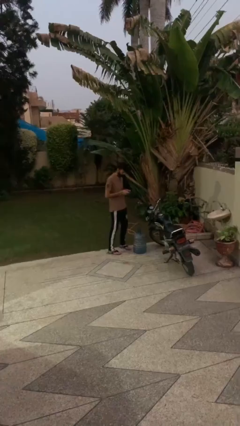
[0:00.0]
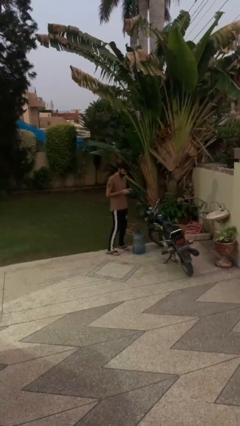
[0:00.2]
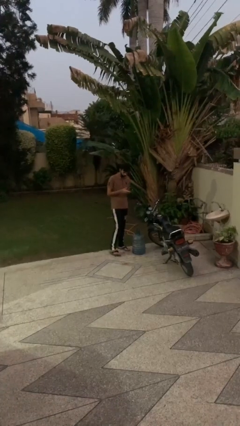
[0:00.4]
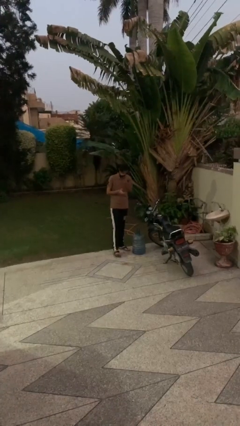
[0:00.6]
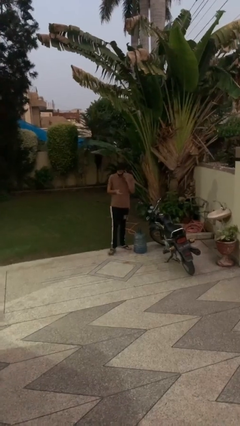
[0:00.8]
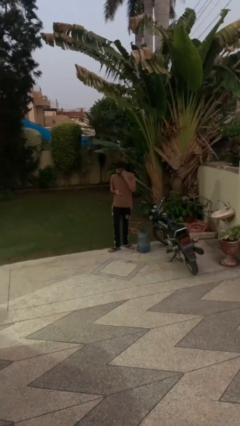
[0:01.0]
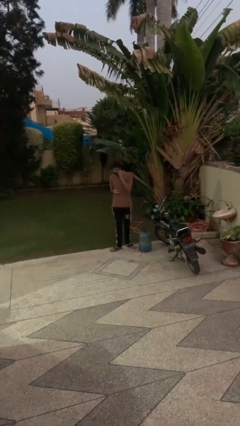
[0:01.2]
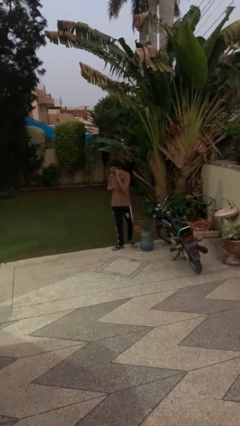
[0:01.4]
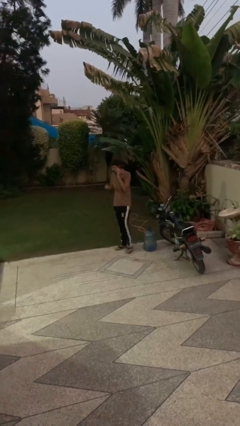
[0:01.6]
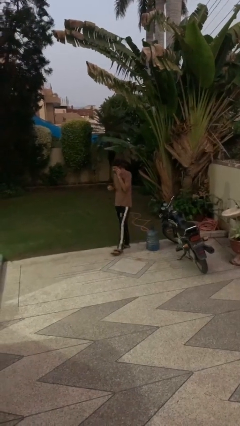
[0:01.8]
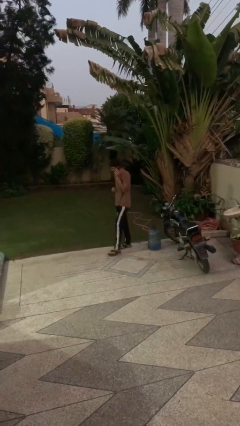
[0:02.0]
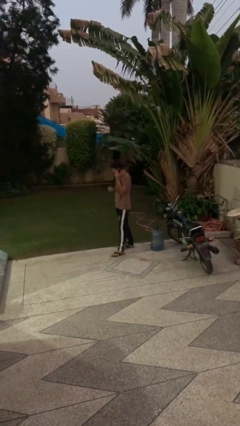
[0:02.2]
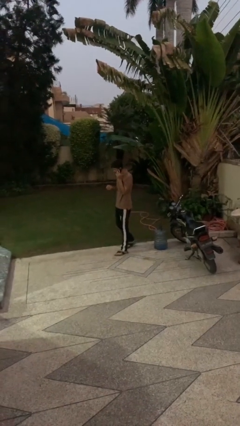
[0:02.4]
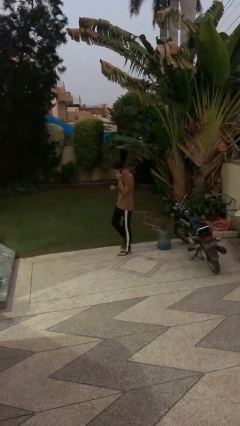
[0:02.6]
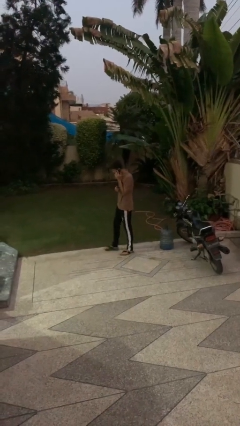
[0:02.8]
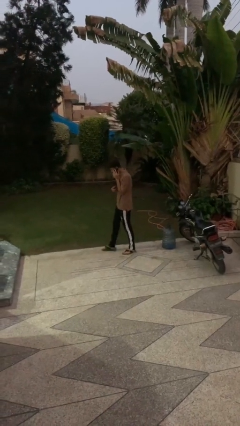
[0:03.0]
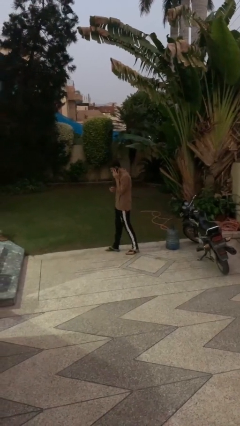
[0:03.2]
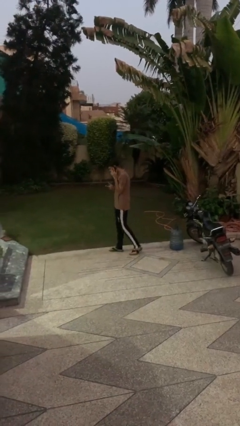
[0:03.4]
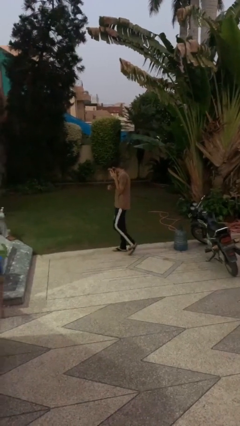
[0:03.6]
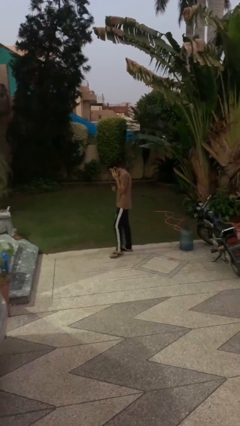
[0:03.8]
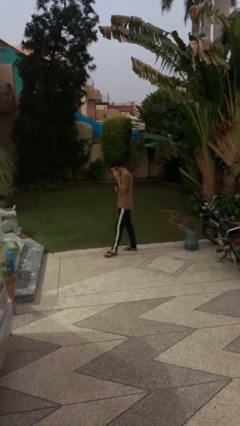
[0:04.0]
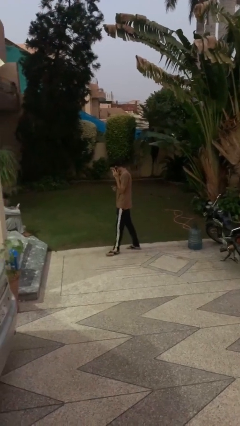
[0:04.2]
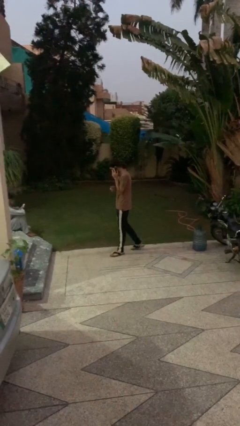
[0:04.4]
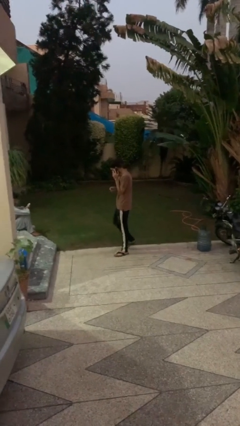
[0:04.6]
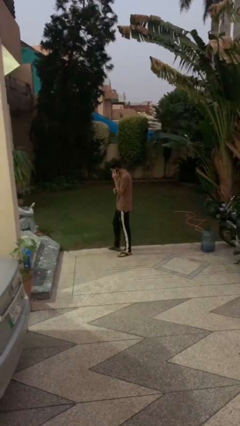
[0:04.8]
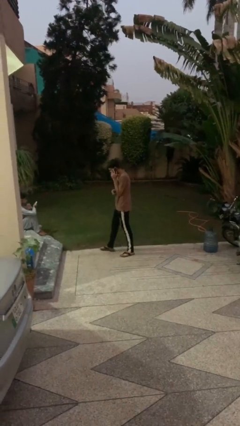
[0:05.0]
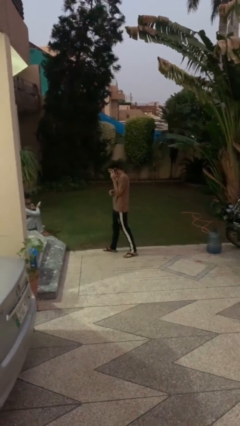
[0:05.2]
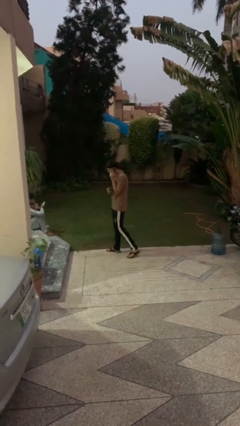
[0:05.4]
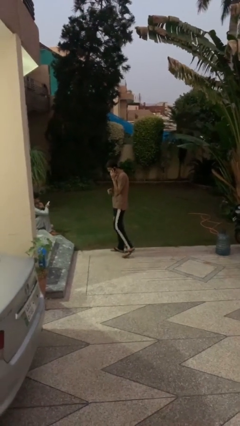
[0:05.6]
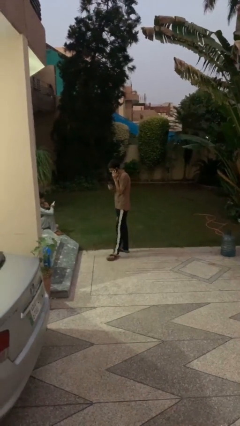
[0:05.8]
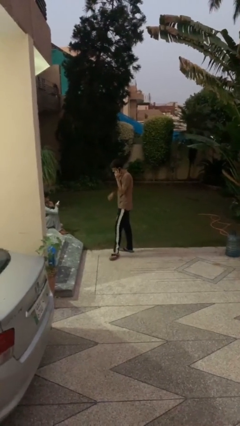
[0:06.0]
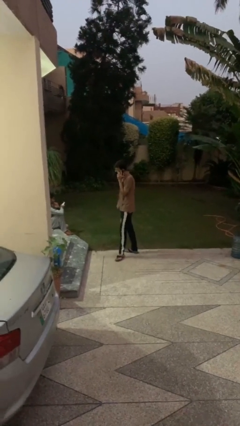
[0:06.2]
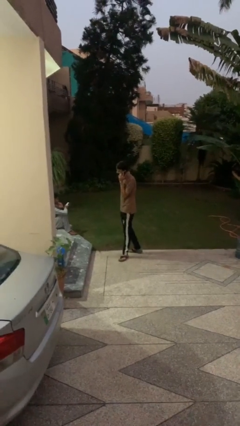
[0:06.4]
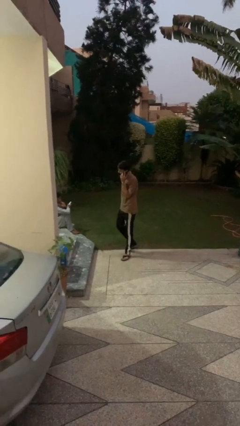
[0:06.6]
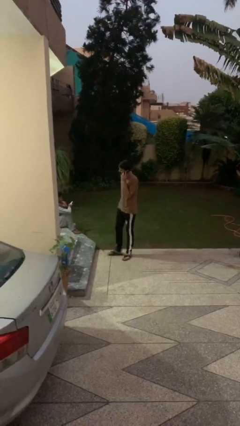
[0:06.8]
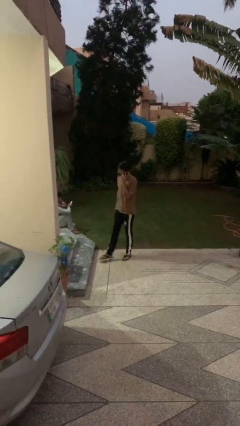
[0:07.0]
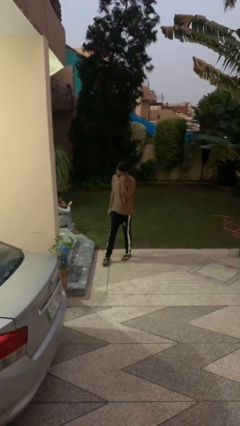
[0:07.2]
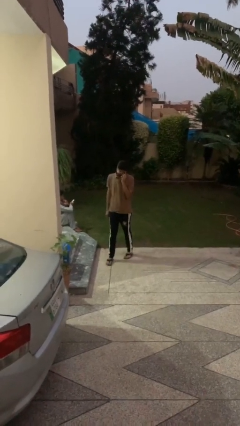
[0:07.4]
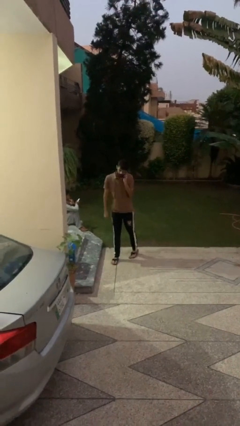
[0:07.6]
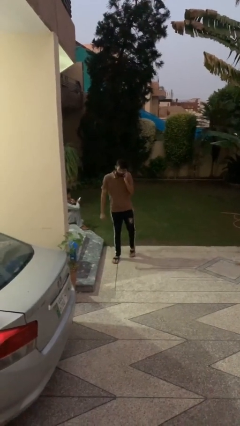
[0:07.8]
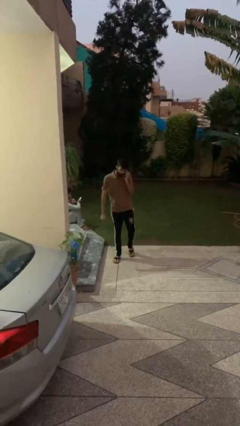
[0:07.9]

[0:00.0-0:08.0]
person talks on phone

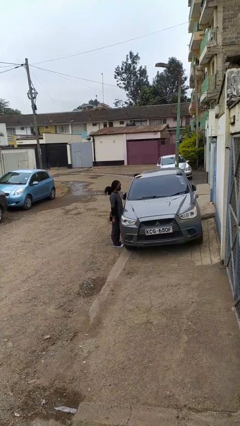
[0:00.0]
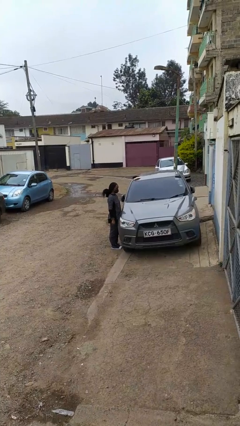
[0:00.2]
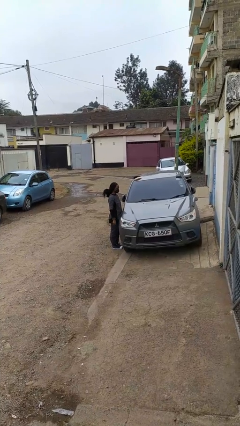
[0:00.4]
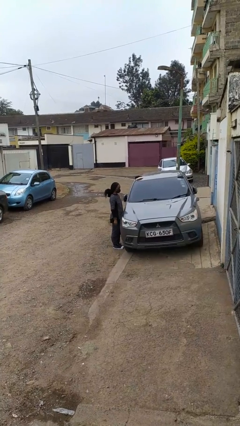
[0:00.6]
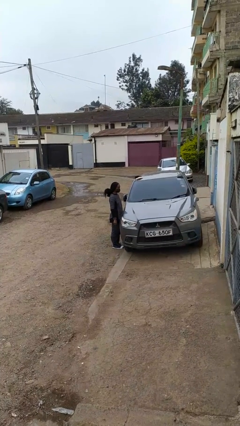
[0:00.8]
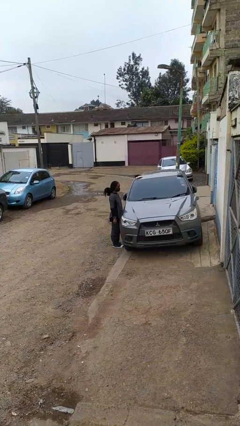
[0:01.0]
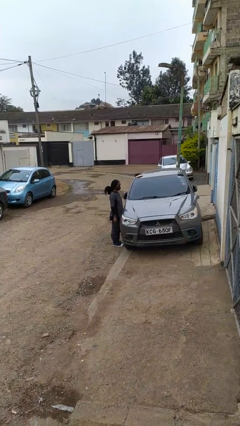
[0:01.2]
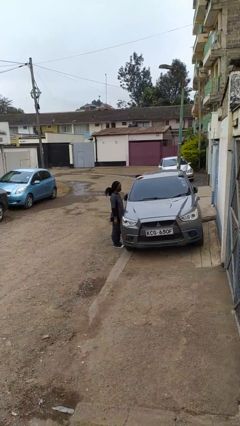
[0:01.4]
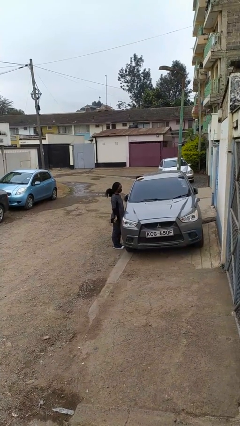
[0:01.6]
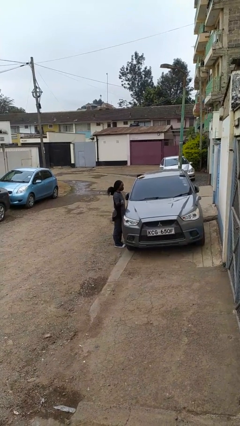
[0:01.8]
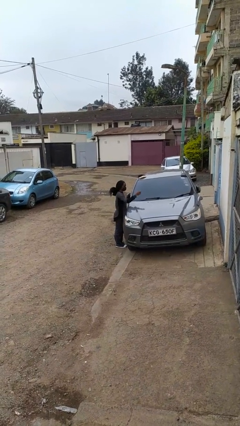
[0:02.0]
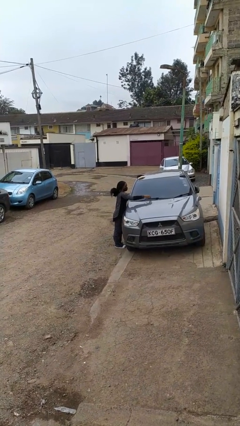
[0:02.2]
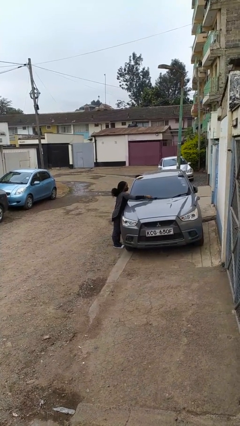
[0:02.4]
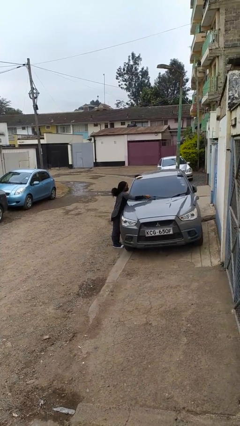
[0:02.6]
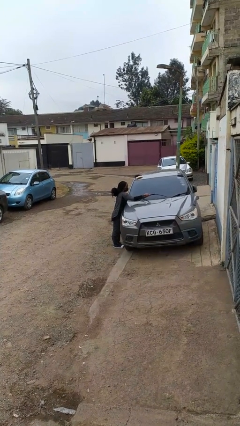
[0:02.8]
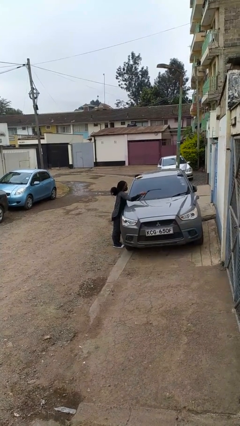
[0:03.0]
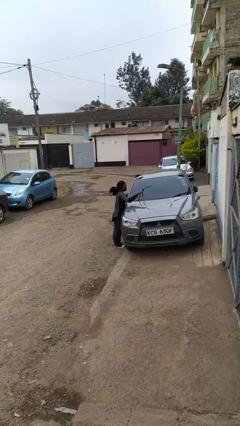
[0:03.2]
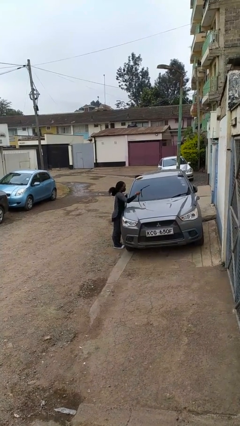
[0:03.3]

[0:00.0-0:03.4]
person picks up object from couch

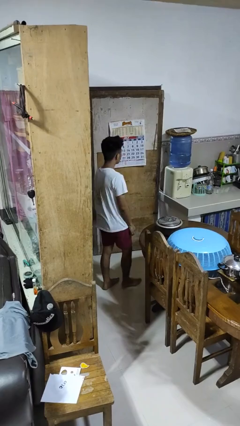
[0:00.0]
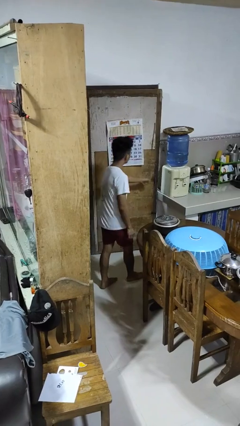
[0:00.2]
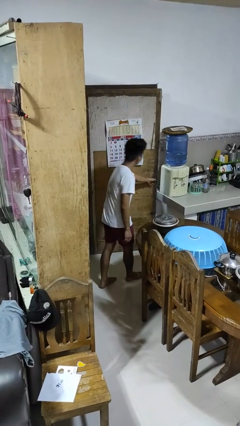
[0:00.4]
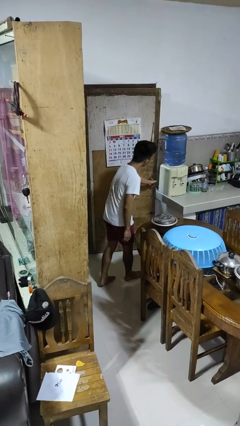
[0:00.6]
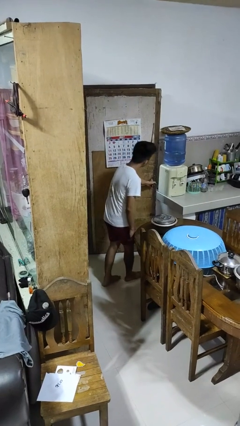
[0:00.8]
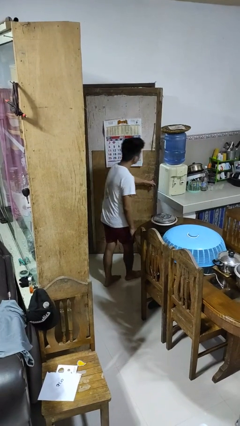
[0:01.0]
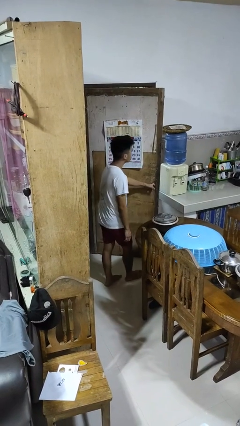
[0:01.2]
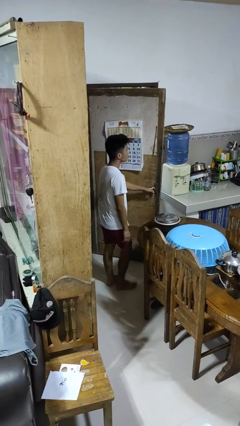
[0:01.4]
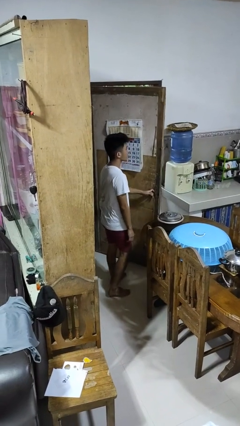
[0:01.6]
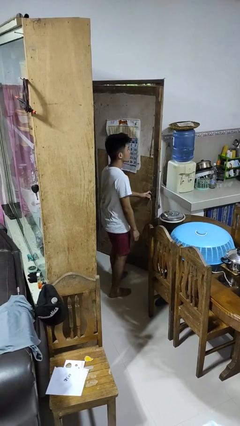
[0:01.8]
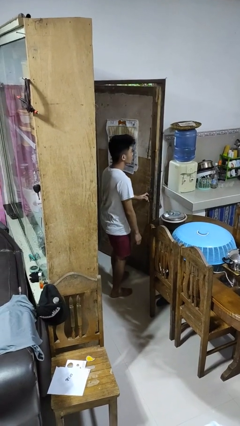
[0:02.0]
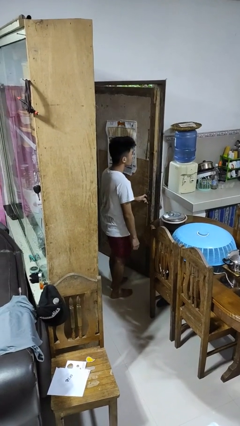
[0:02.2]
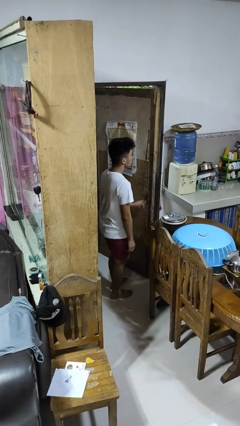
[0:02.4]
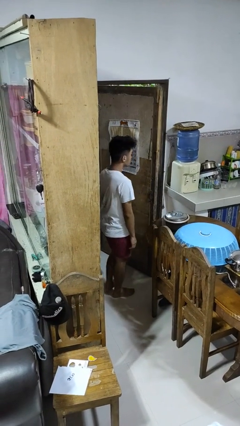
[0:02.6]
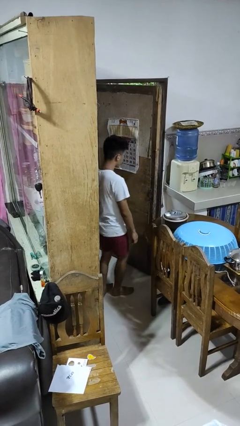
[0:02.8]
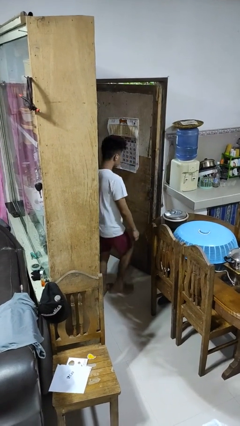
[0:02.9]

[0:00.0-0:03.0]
person opens facility door

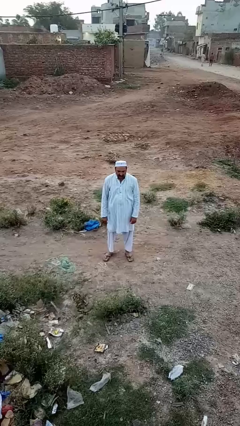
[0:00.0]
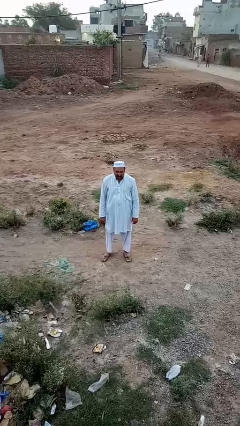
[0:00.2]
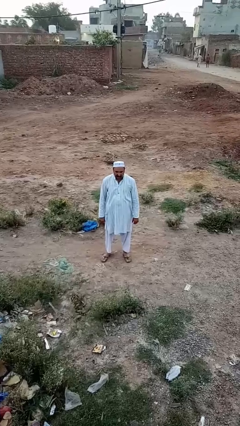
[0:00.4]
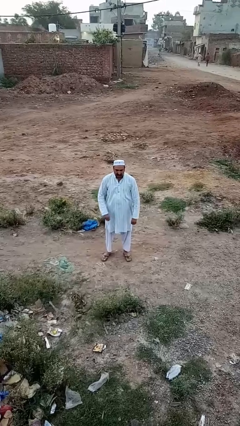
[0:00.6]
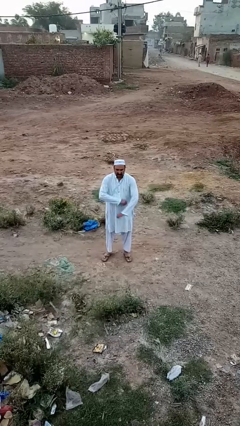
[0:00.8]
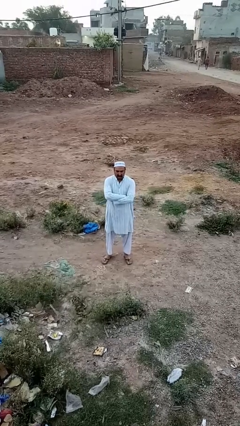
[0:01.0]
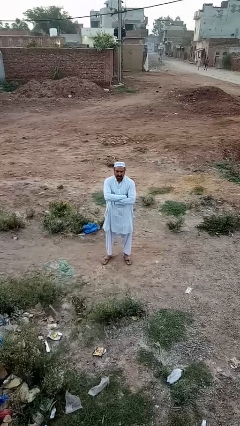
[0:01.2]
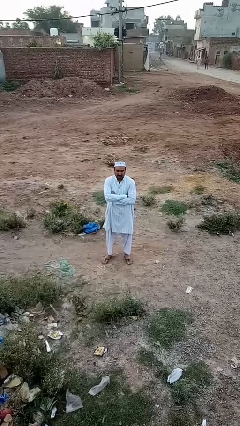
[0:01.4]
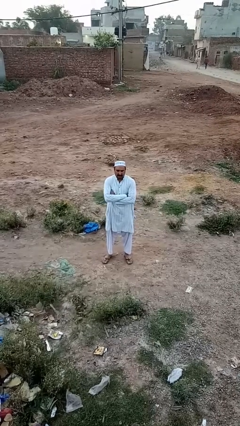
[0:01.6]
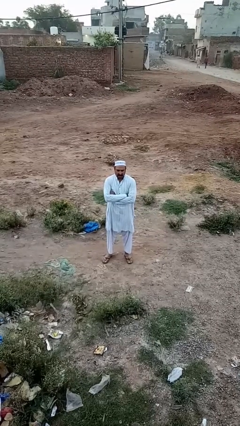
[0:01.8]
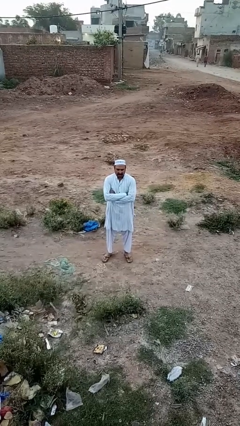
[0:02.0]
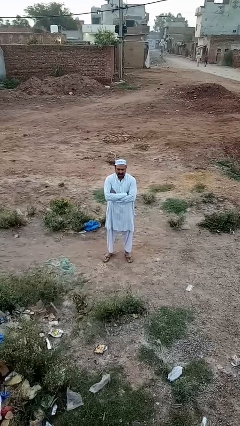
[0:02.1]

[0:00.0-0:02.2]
person crosses arms

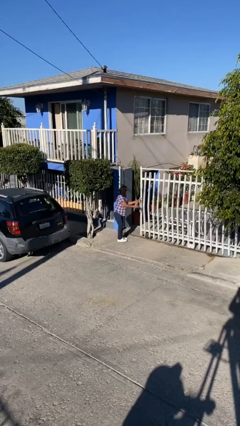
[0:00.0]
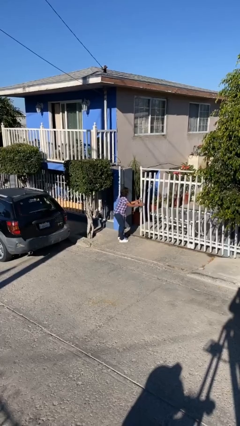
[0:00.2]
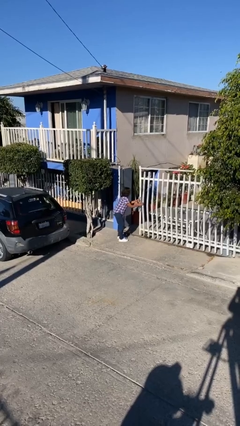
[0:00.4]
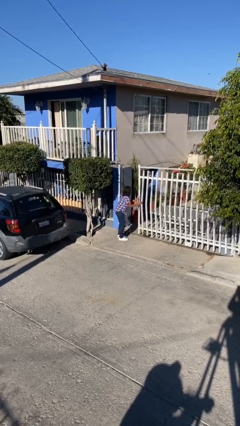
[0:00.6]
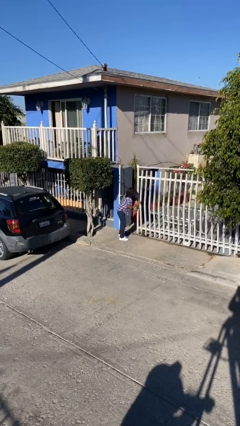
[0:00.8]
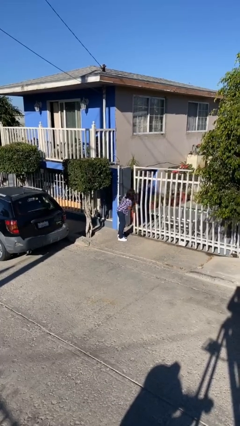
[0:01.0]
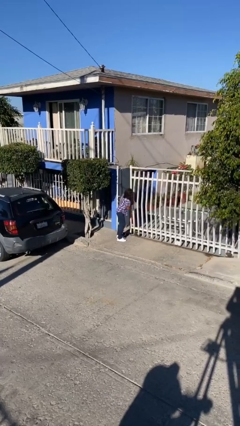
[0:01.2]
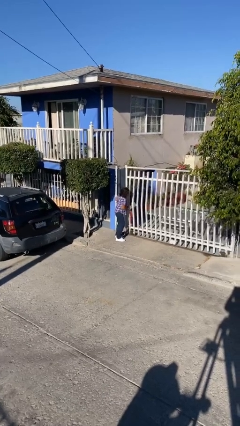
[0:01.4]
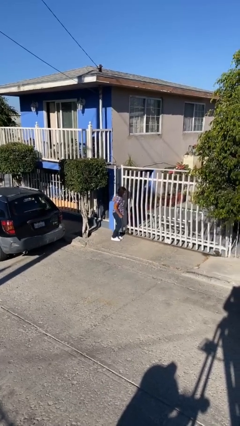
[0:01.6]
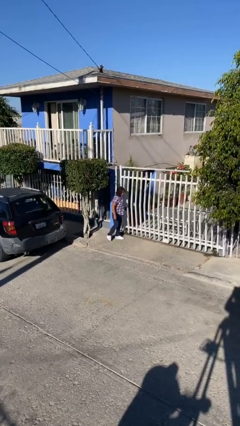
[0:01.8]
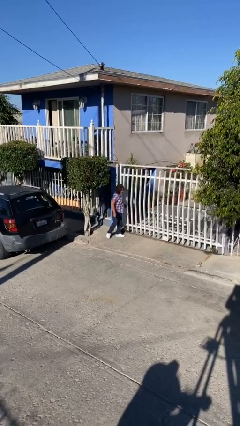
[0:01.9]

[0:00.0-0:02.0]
person closes facility door
